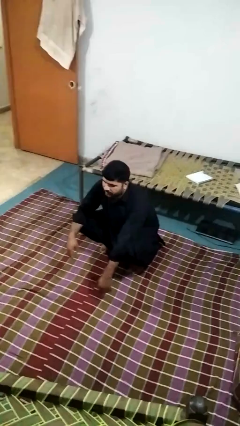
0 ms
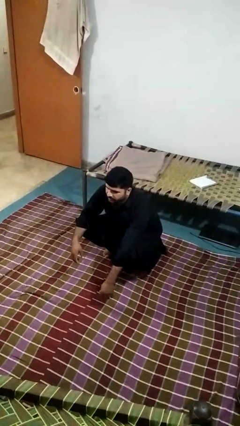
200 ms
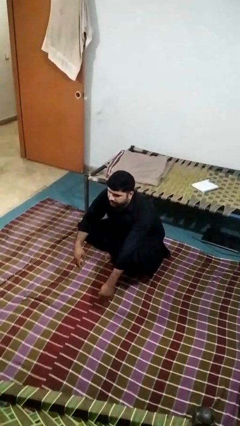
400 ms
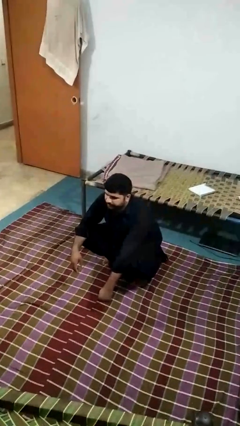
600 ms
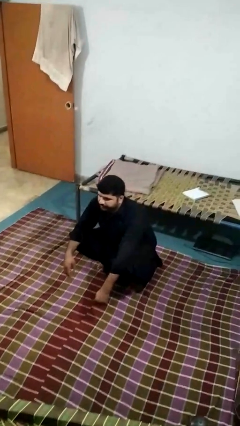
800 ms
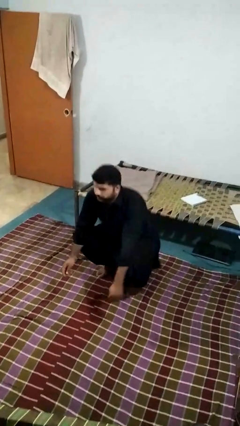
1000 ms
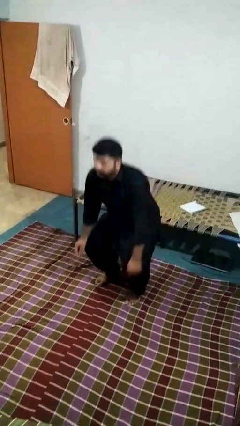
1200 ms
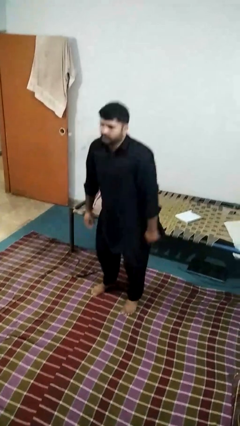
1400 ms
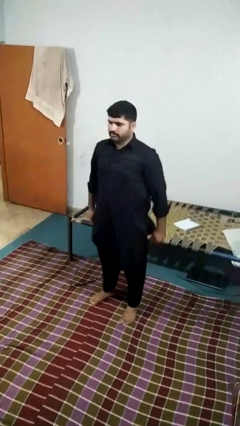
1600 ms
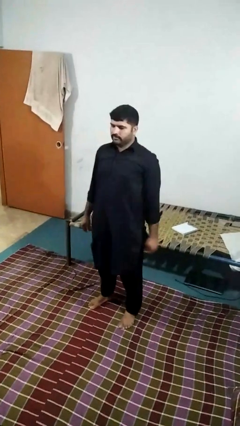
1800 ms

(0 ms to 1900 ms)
person stands up

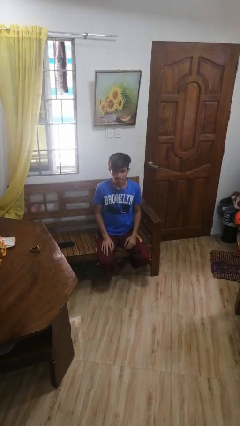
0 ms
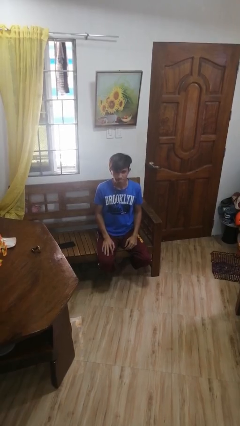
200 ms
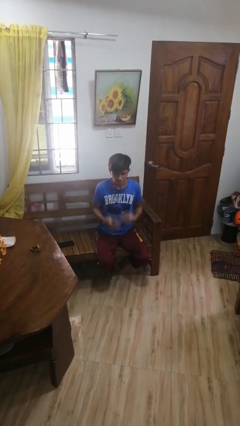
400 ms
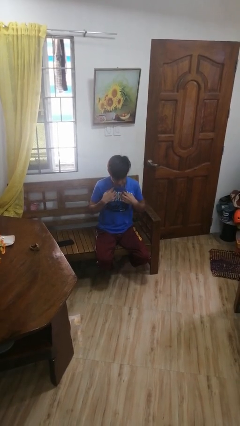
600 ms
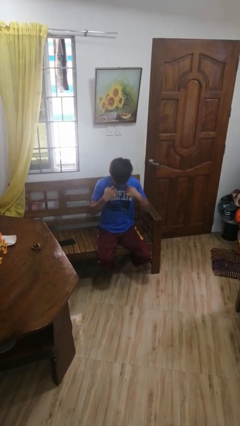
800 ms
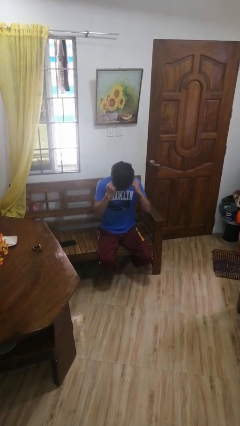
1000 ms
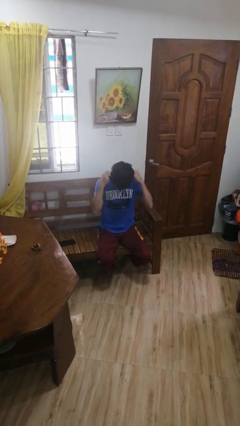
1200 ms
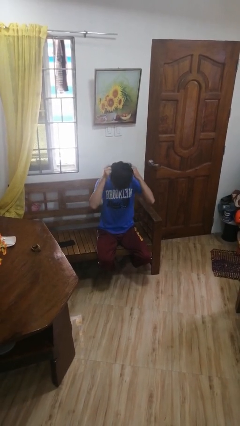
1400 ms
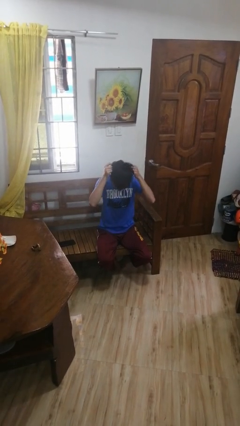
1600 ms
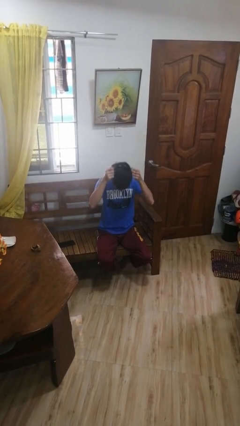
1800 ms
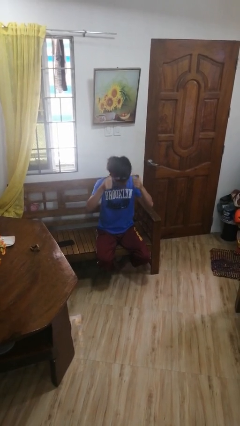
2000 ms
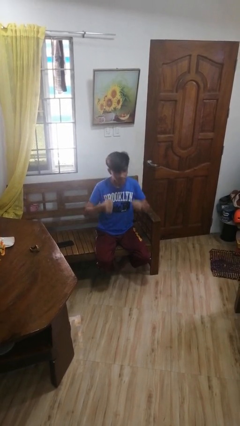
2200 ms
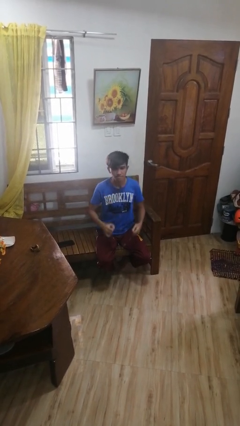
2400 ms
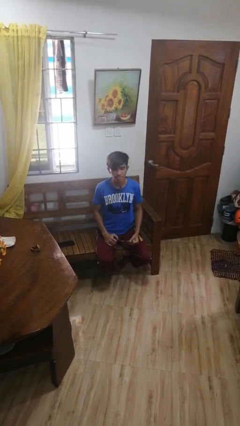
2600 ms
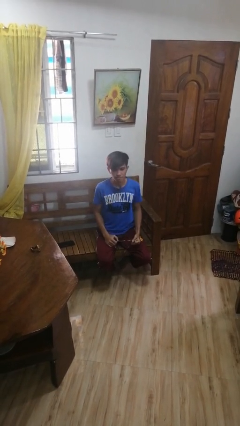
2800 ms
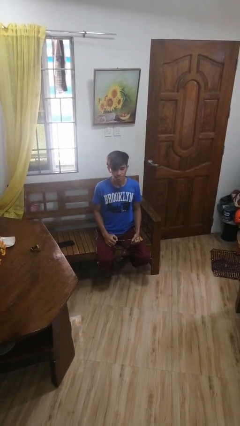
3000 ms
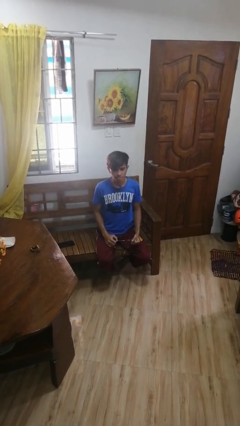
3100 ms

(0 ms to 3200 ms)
person takes off necklace

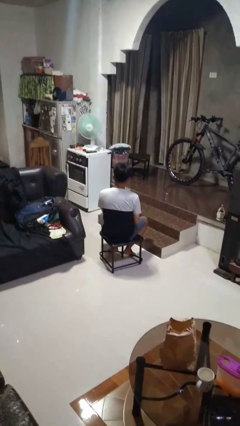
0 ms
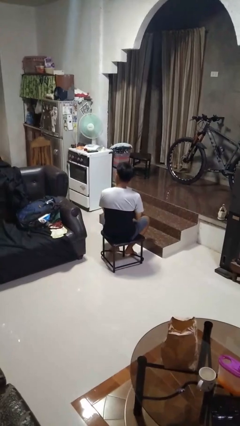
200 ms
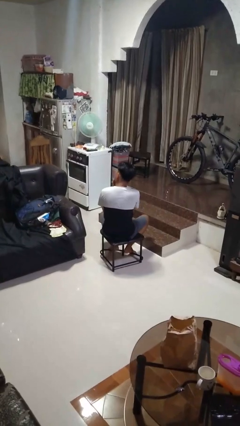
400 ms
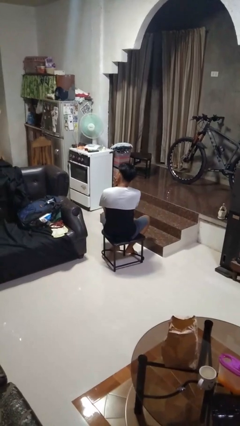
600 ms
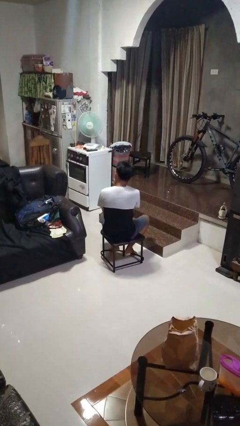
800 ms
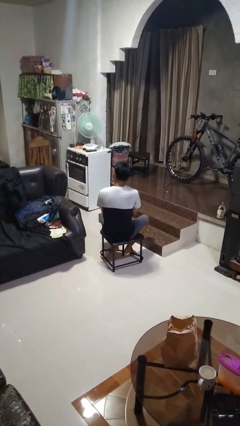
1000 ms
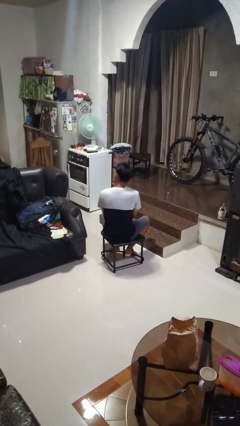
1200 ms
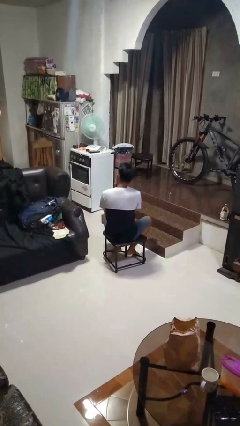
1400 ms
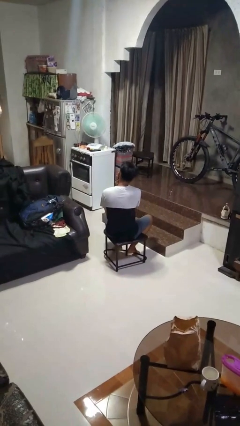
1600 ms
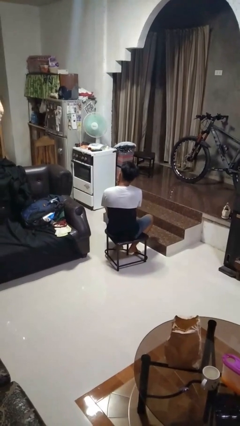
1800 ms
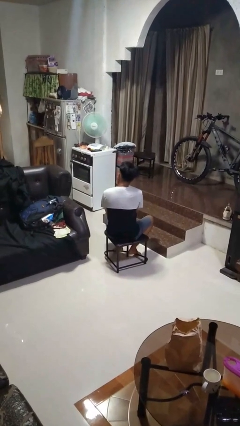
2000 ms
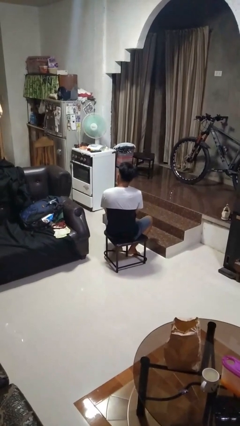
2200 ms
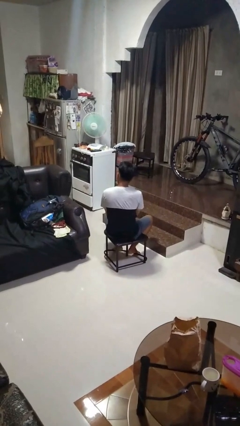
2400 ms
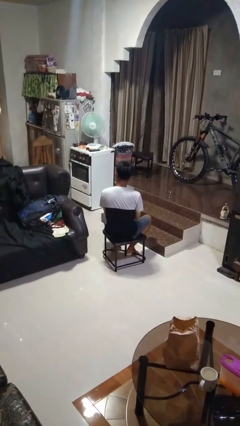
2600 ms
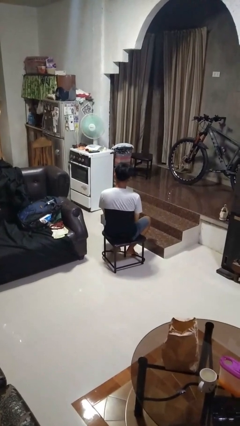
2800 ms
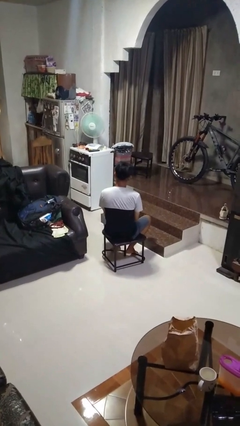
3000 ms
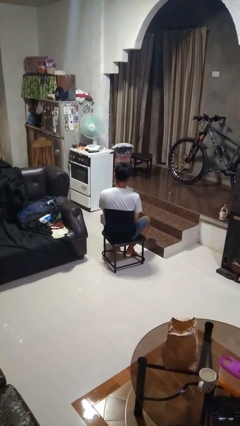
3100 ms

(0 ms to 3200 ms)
person strokes chin

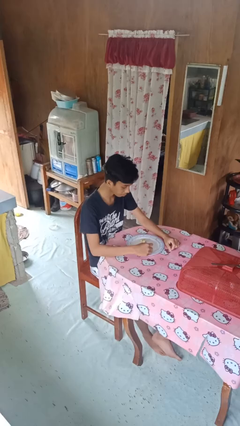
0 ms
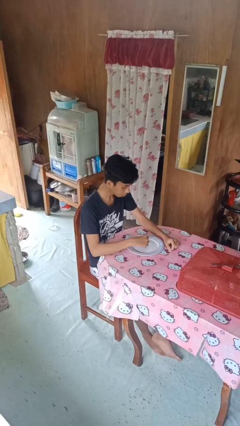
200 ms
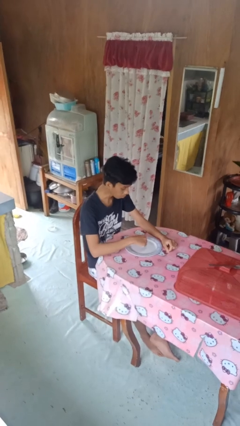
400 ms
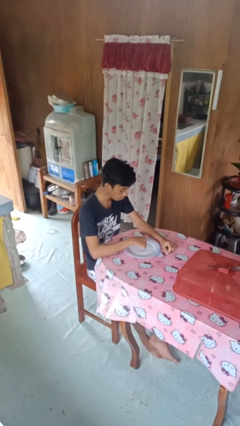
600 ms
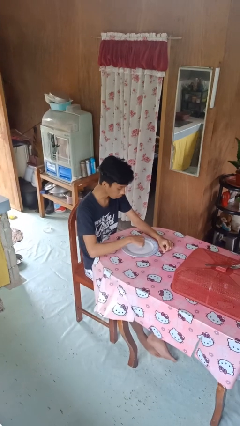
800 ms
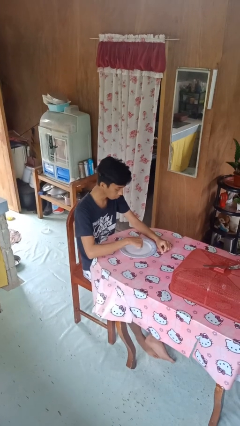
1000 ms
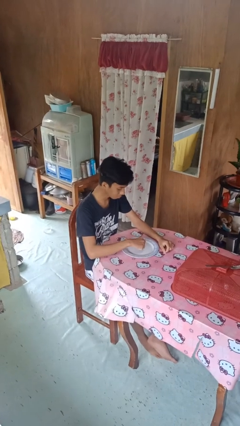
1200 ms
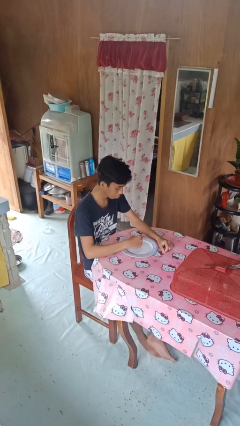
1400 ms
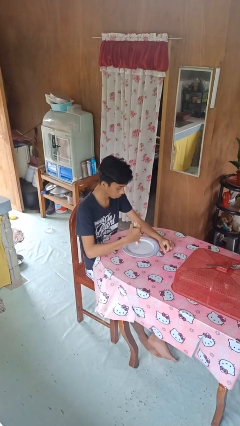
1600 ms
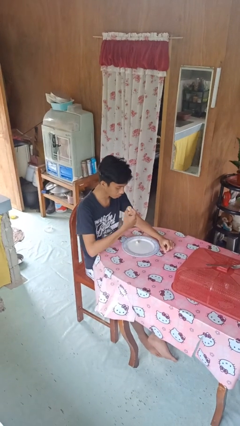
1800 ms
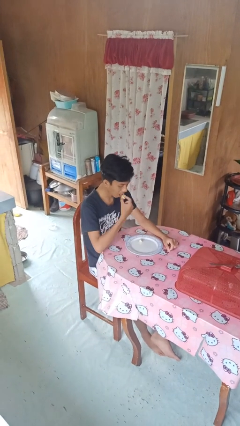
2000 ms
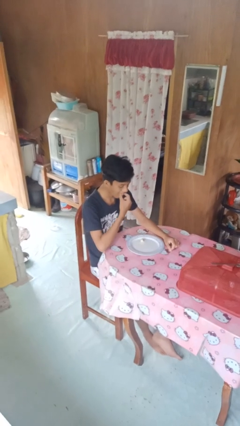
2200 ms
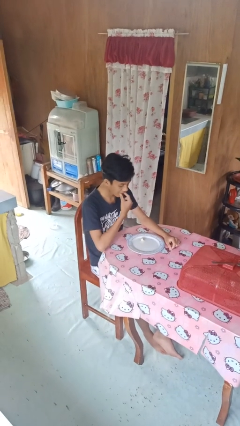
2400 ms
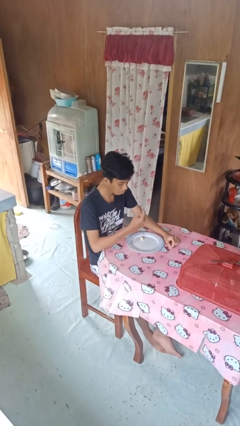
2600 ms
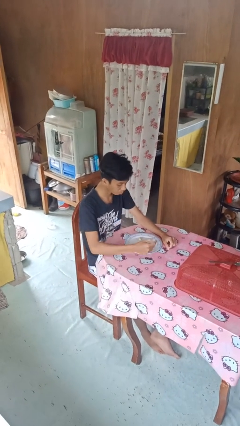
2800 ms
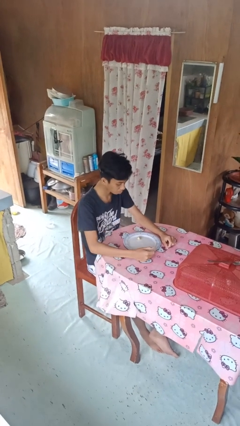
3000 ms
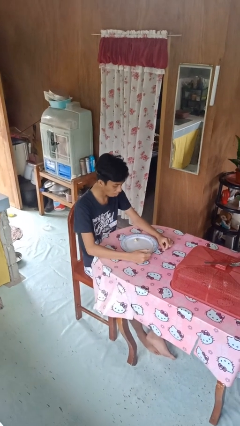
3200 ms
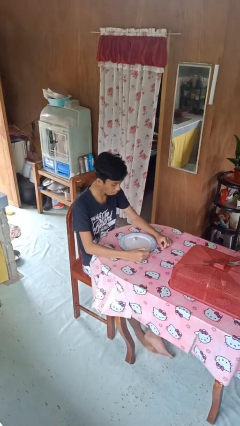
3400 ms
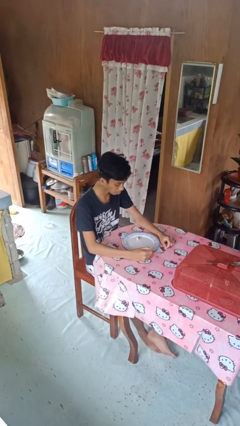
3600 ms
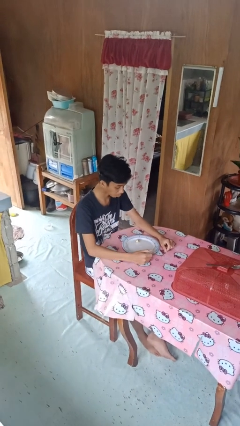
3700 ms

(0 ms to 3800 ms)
person eats with hands

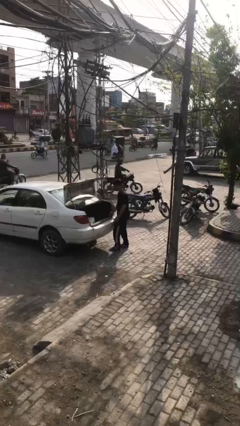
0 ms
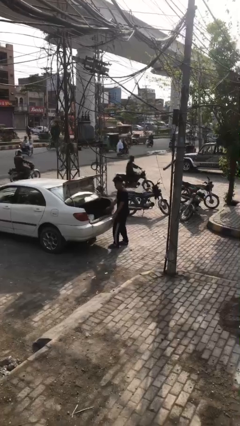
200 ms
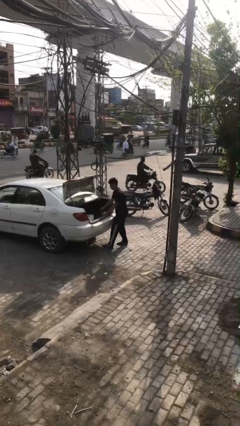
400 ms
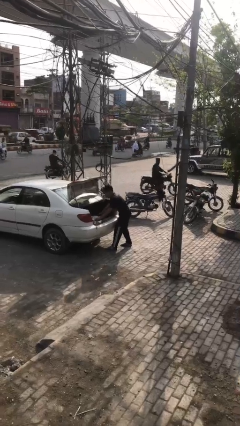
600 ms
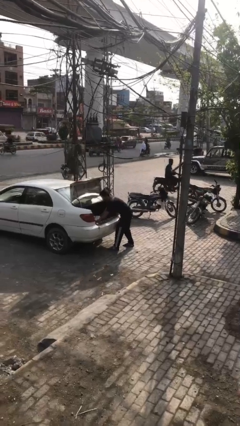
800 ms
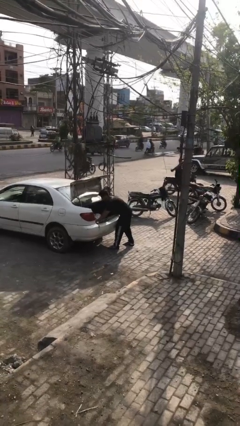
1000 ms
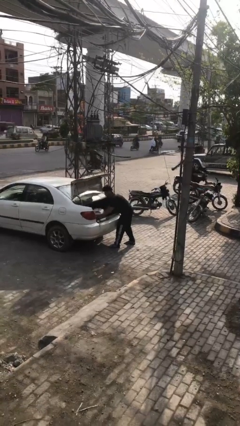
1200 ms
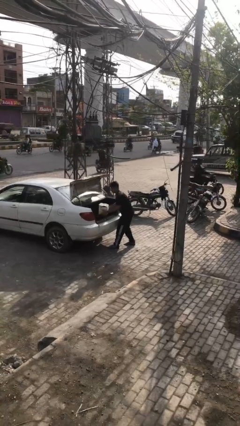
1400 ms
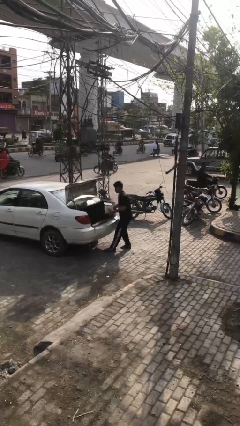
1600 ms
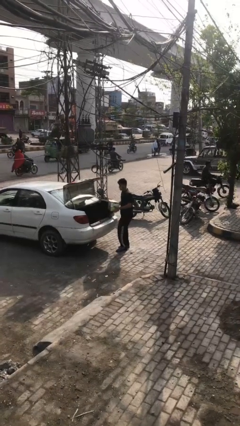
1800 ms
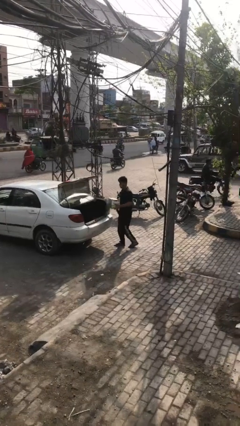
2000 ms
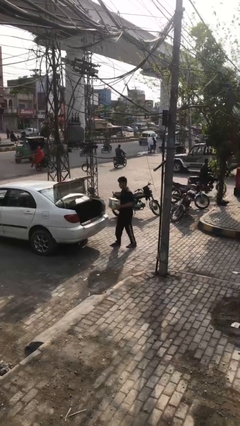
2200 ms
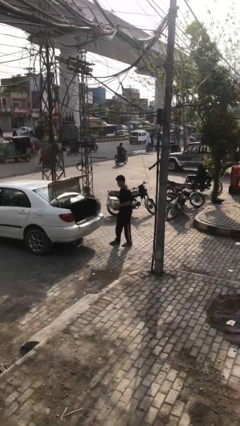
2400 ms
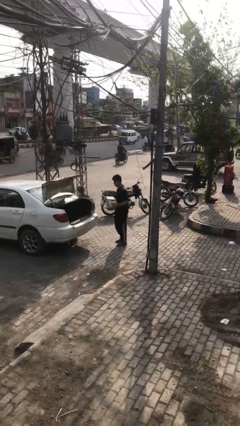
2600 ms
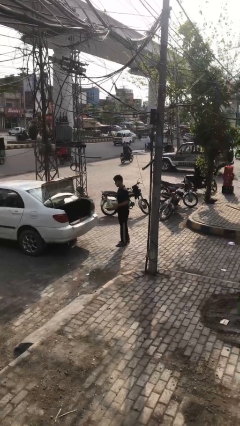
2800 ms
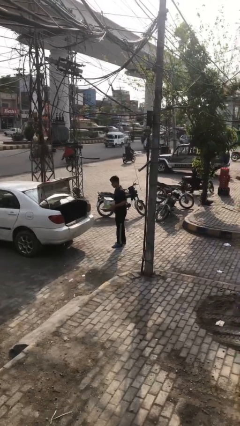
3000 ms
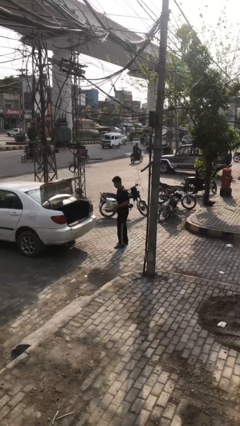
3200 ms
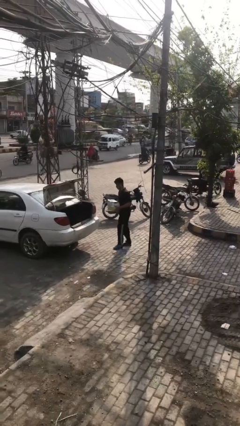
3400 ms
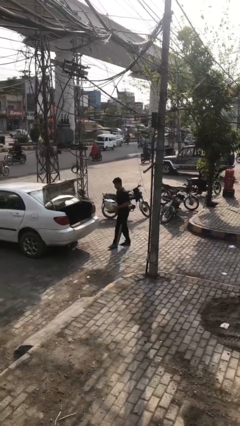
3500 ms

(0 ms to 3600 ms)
person unloads car

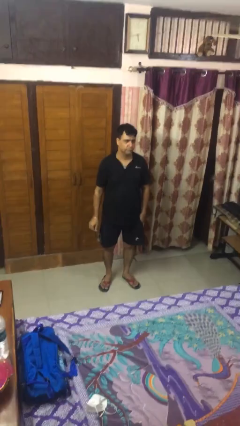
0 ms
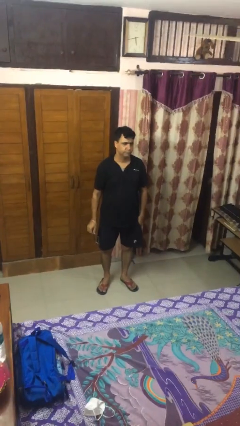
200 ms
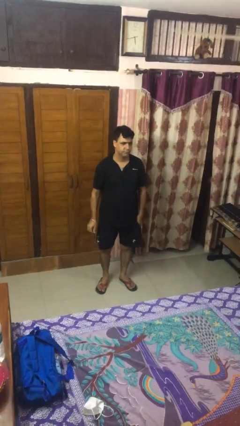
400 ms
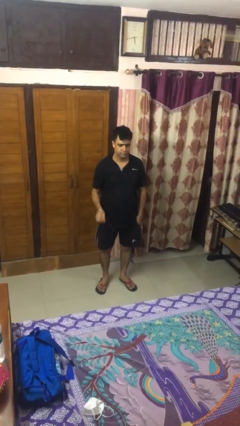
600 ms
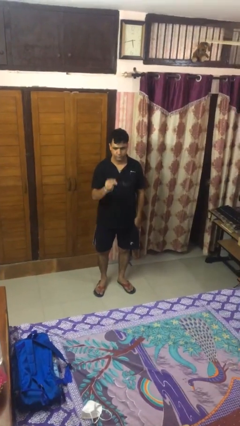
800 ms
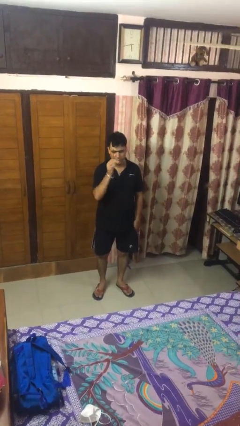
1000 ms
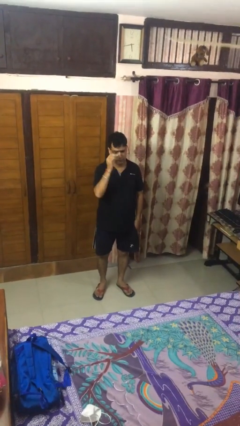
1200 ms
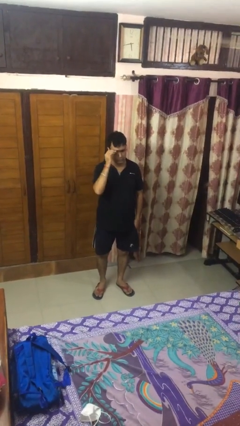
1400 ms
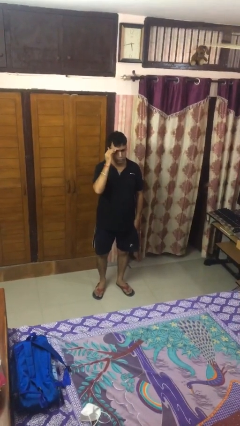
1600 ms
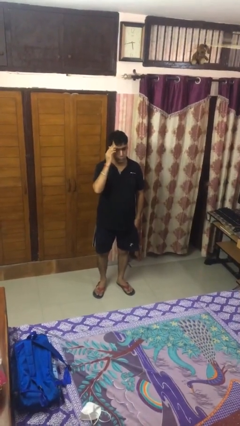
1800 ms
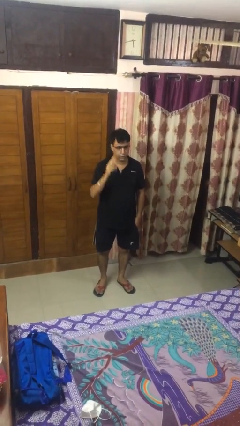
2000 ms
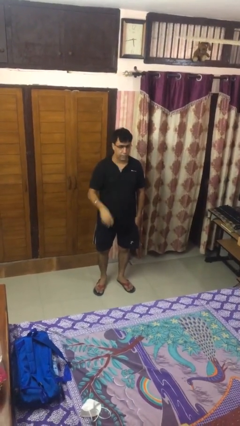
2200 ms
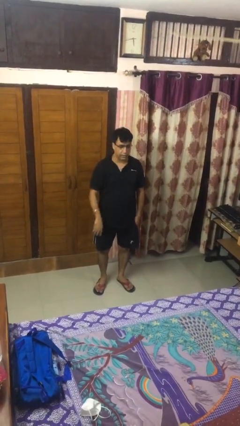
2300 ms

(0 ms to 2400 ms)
person puts on glasses
